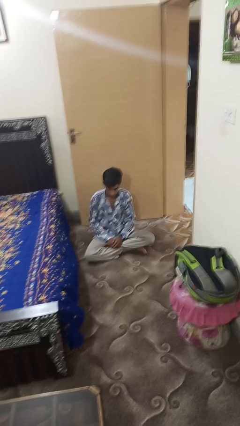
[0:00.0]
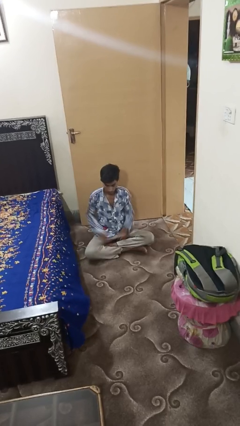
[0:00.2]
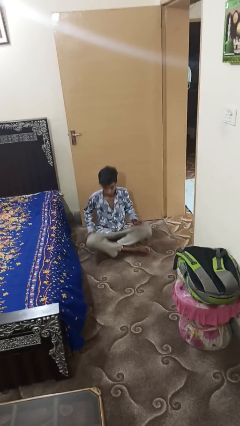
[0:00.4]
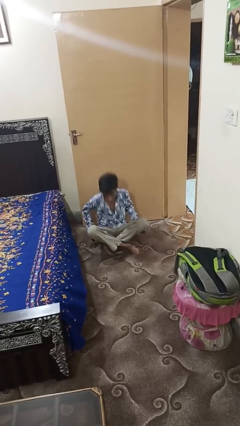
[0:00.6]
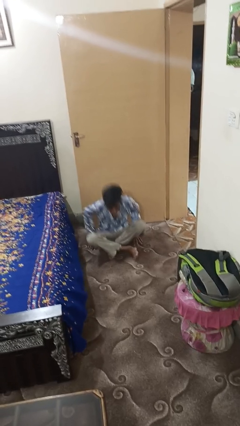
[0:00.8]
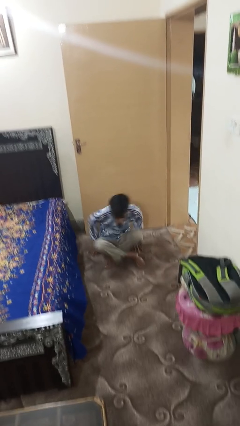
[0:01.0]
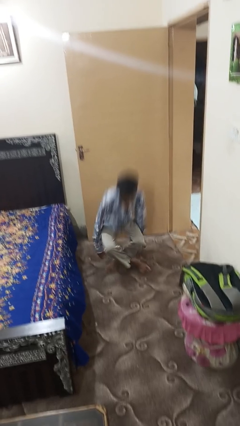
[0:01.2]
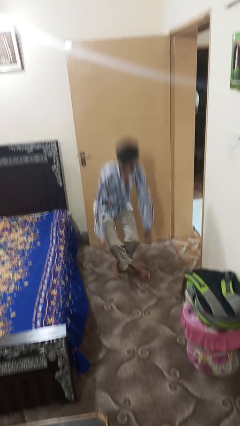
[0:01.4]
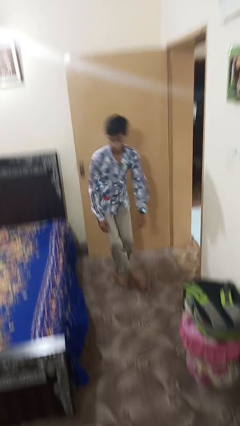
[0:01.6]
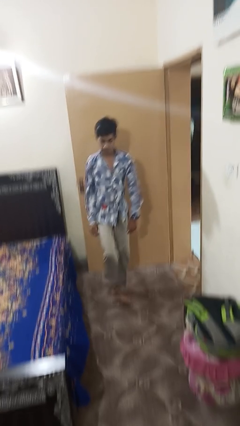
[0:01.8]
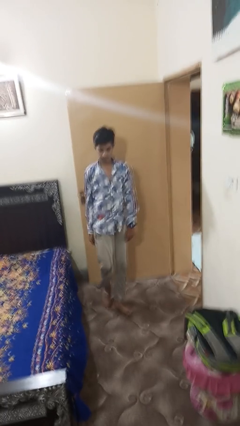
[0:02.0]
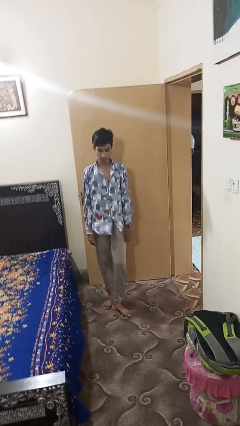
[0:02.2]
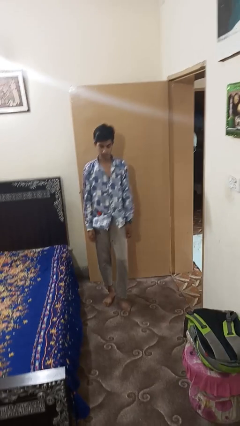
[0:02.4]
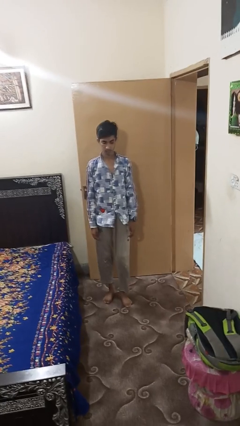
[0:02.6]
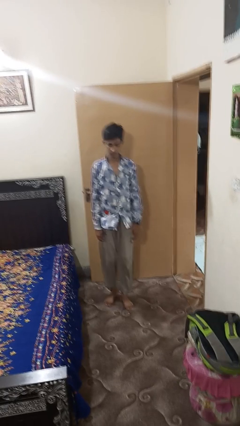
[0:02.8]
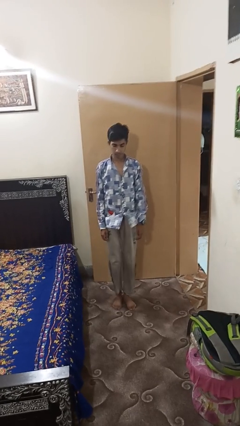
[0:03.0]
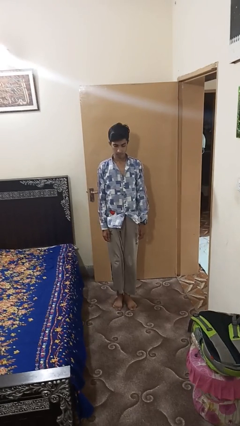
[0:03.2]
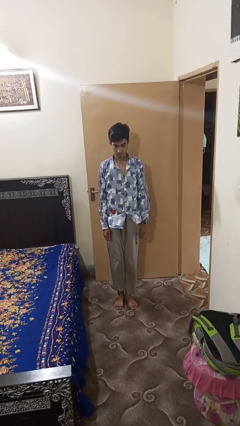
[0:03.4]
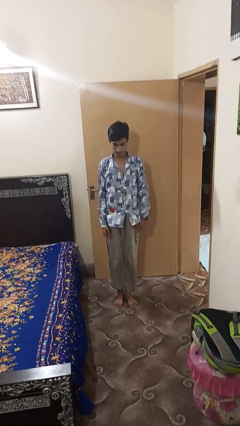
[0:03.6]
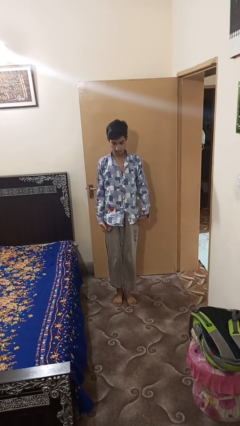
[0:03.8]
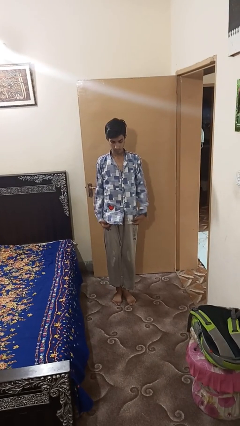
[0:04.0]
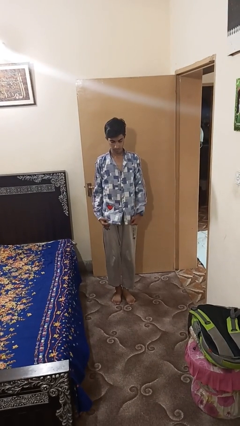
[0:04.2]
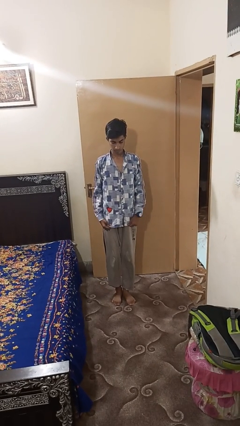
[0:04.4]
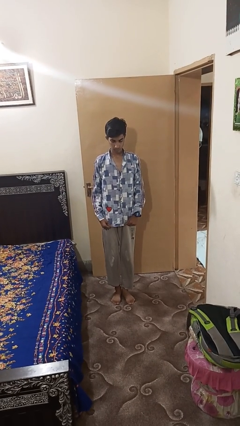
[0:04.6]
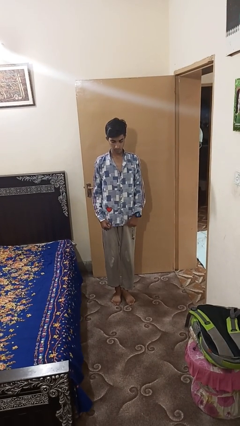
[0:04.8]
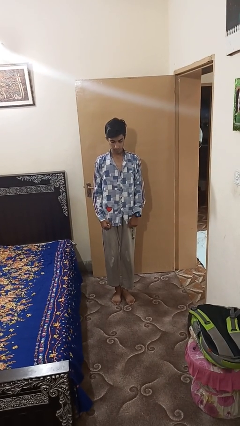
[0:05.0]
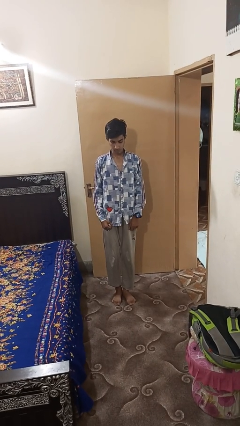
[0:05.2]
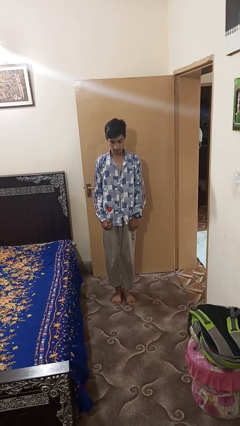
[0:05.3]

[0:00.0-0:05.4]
person stands up from floor

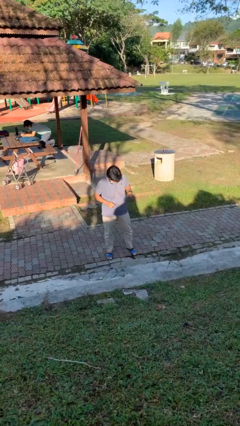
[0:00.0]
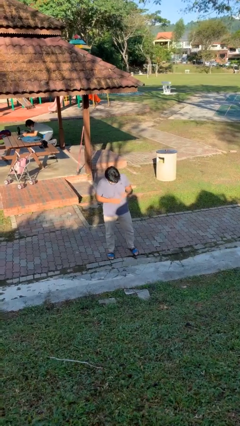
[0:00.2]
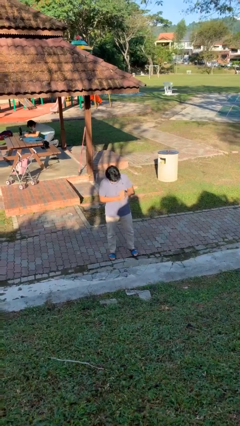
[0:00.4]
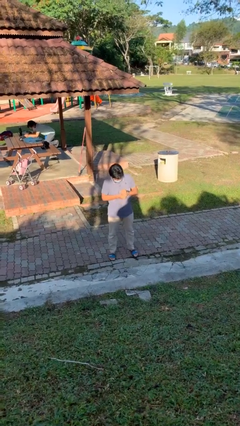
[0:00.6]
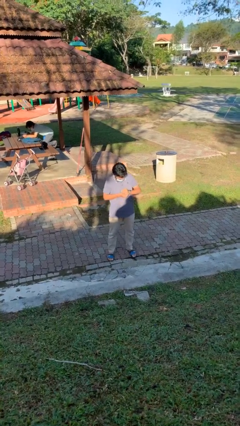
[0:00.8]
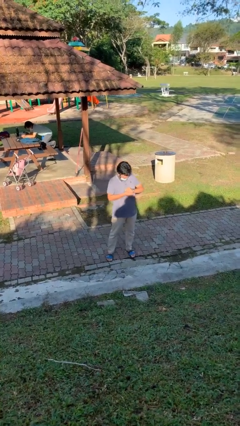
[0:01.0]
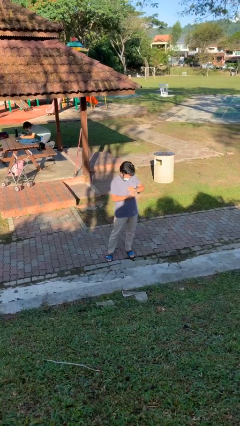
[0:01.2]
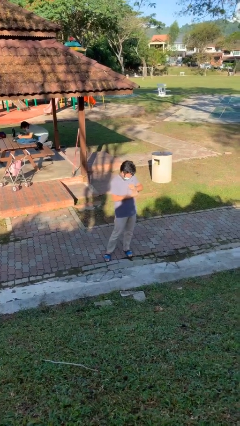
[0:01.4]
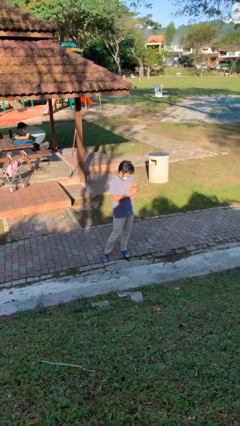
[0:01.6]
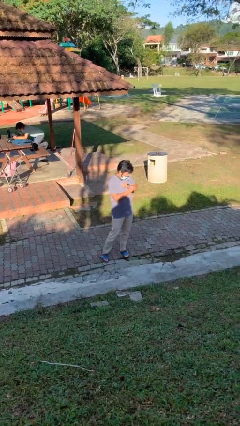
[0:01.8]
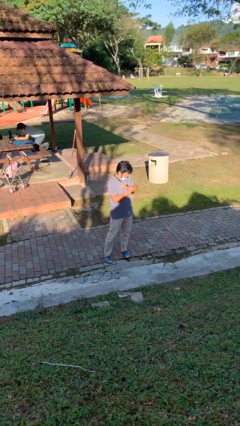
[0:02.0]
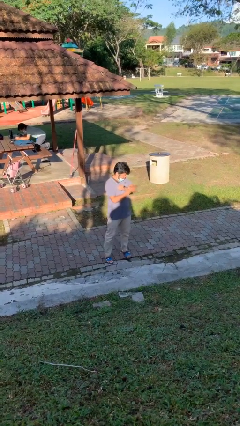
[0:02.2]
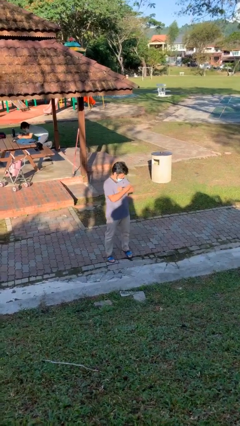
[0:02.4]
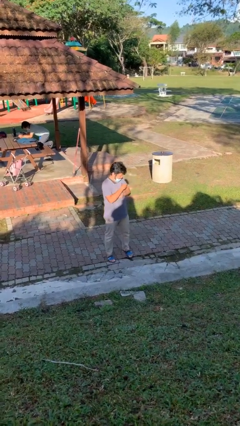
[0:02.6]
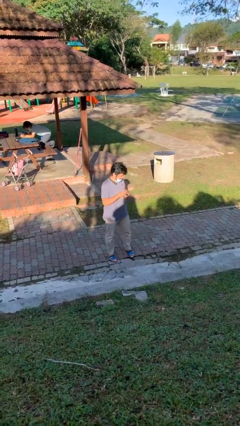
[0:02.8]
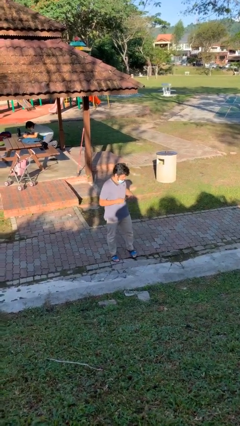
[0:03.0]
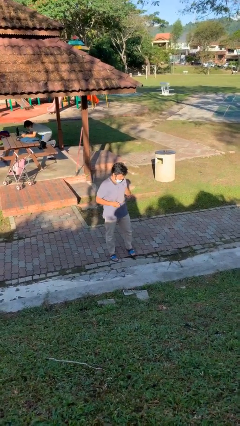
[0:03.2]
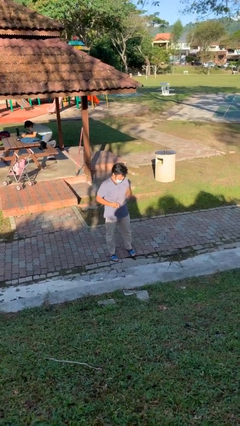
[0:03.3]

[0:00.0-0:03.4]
person takes off wristwatch

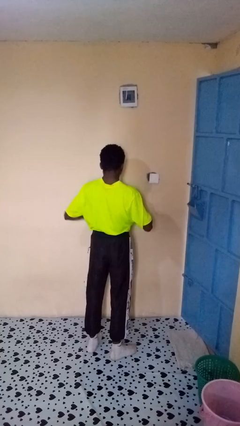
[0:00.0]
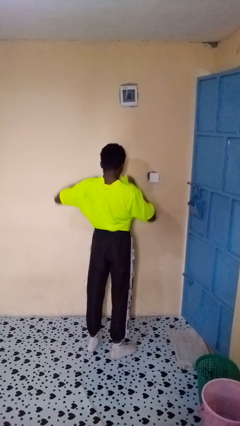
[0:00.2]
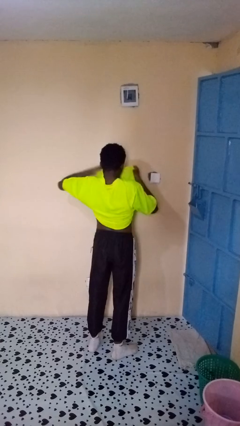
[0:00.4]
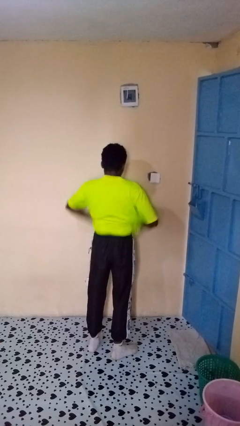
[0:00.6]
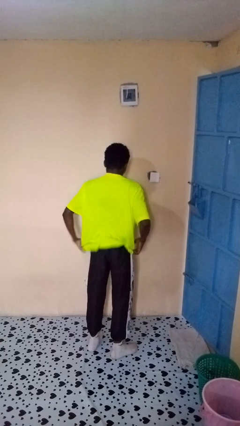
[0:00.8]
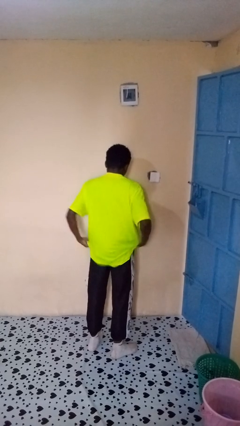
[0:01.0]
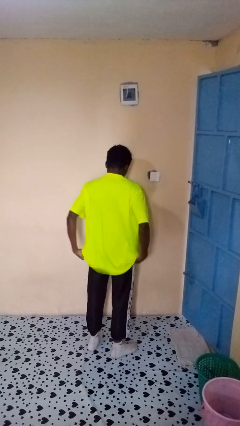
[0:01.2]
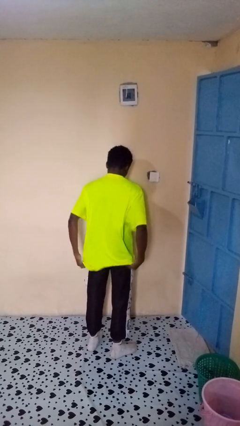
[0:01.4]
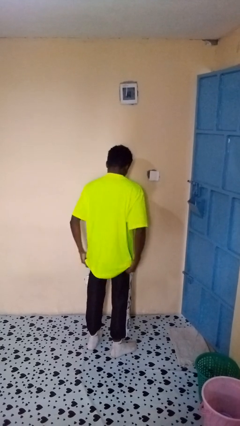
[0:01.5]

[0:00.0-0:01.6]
person untucks shirt

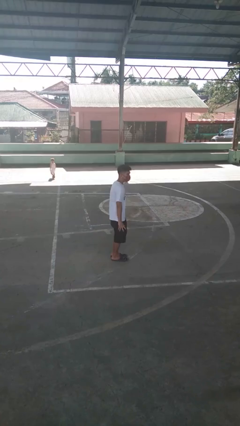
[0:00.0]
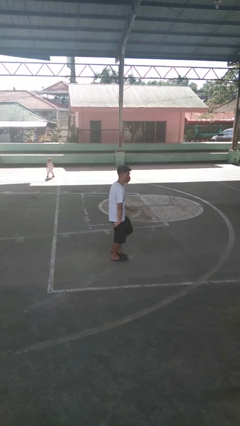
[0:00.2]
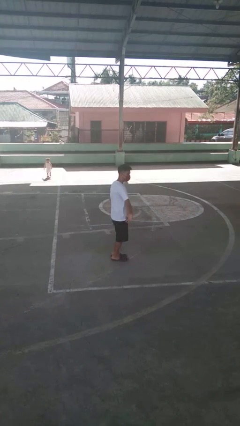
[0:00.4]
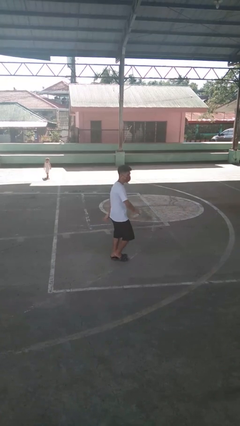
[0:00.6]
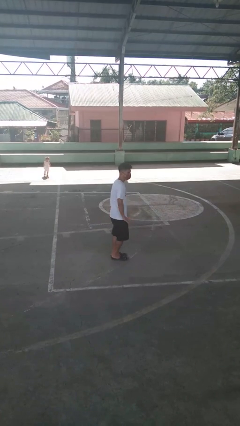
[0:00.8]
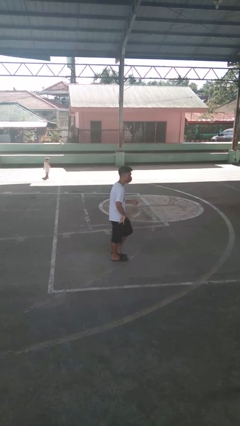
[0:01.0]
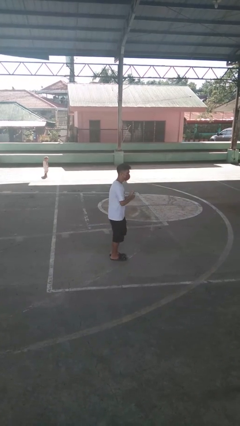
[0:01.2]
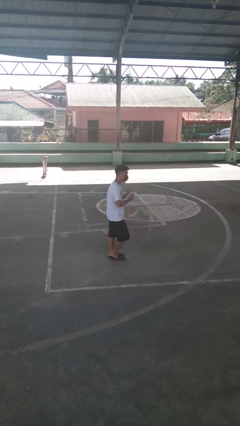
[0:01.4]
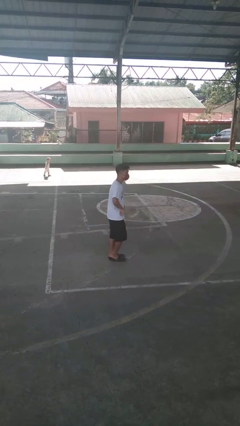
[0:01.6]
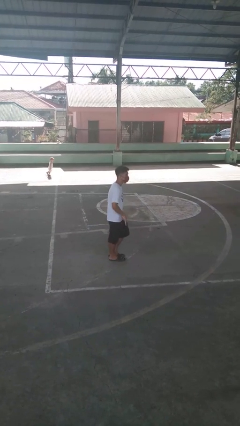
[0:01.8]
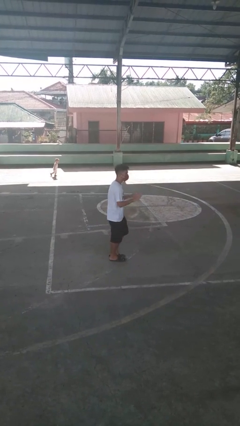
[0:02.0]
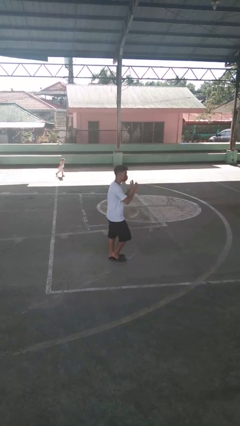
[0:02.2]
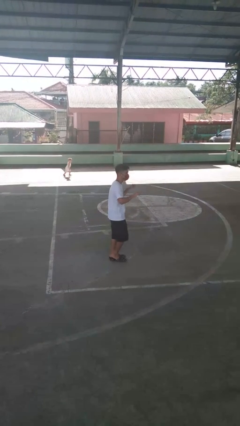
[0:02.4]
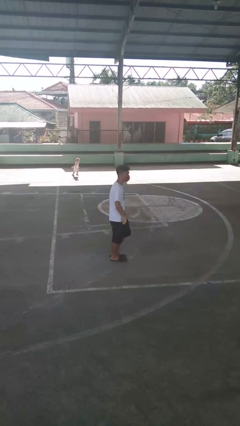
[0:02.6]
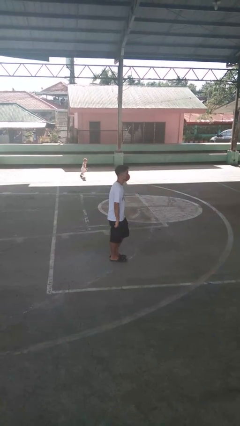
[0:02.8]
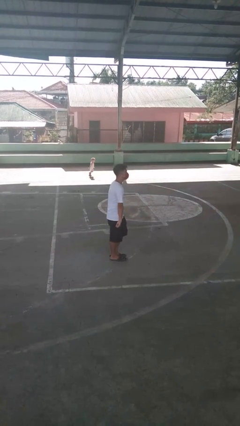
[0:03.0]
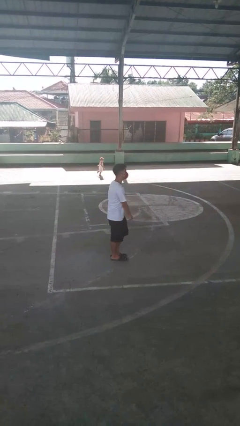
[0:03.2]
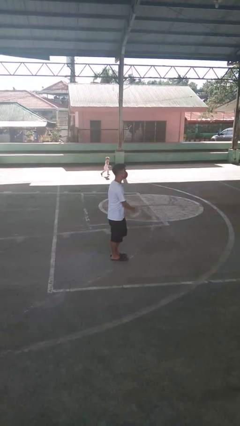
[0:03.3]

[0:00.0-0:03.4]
person dances in place

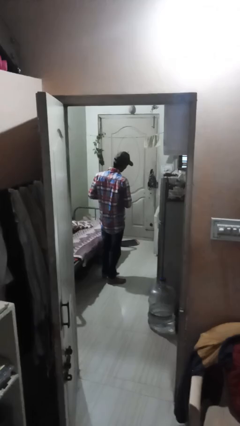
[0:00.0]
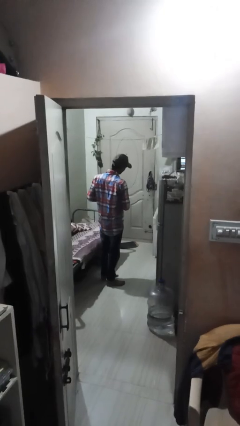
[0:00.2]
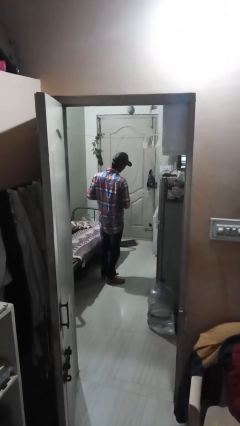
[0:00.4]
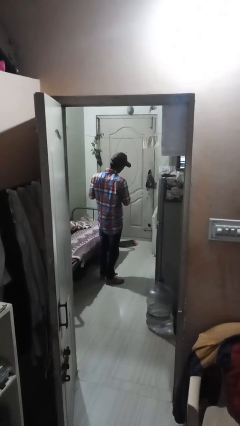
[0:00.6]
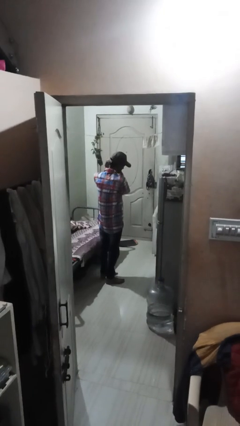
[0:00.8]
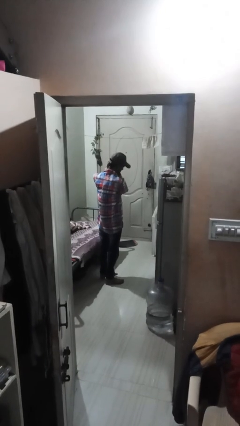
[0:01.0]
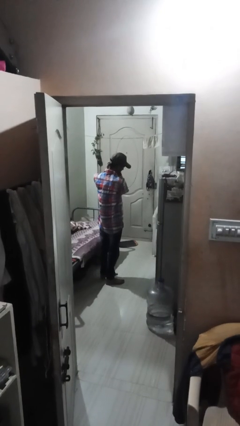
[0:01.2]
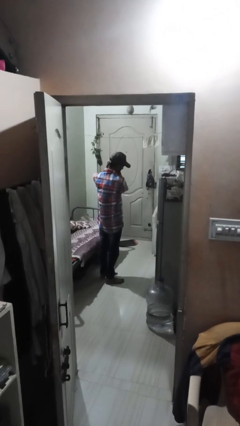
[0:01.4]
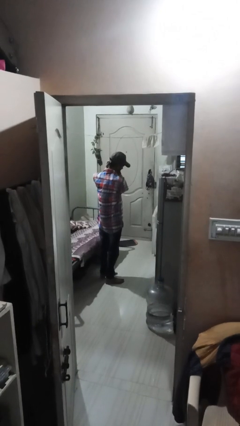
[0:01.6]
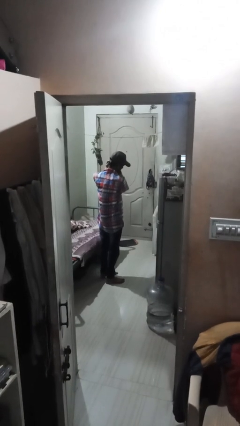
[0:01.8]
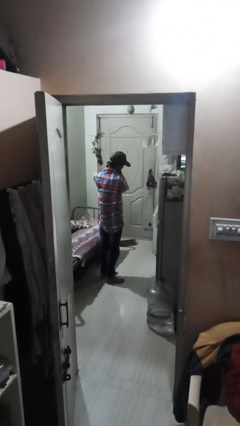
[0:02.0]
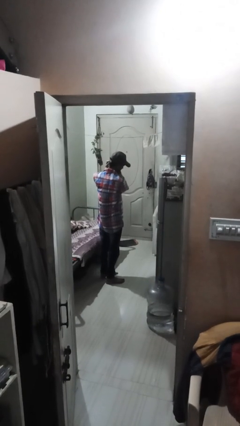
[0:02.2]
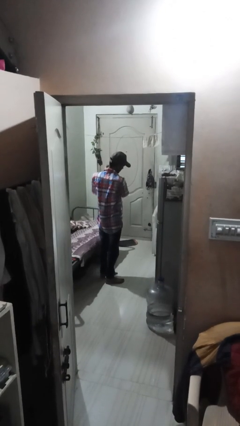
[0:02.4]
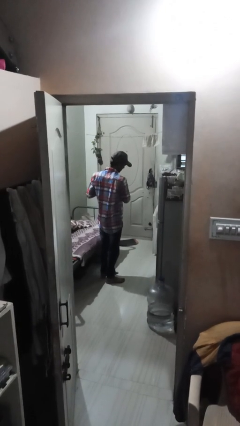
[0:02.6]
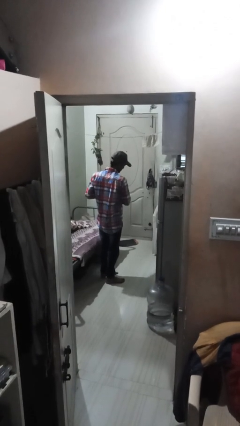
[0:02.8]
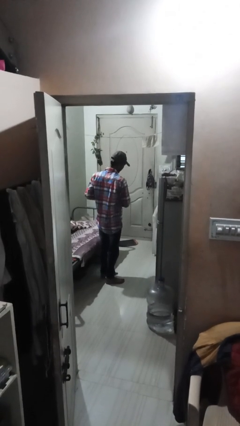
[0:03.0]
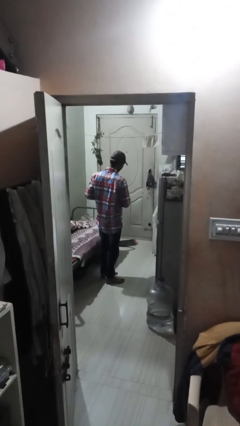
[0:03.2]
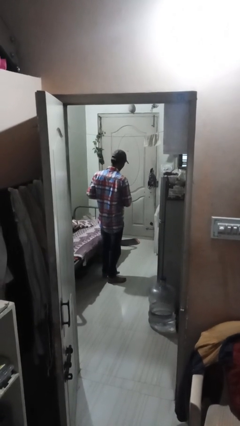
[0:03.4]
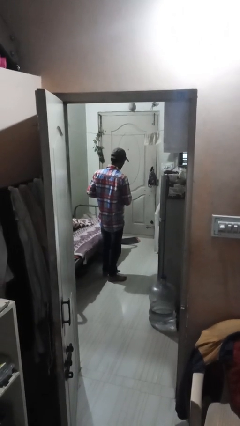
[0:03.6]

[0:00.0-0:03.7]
person takes off earrings
